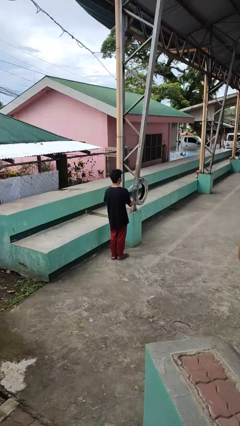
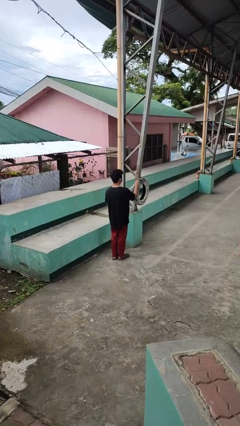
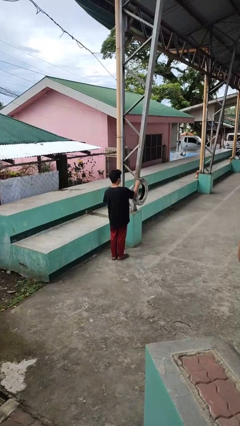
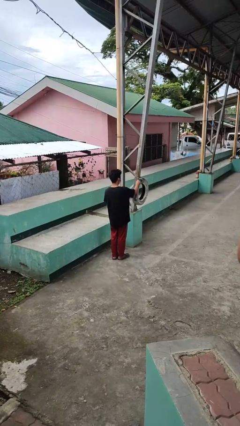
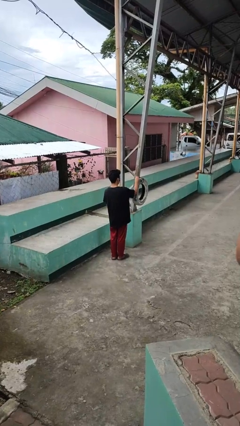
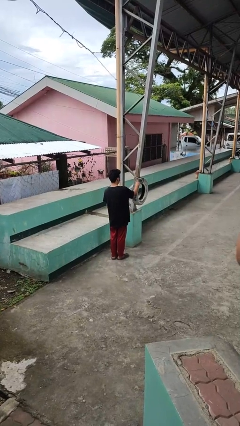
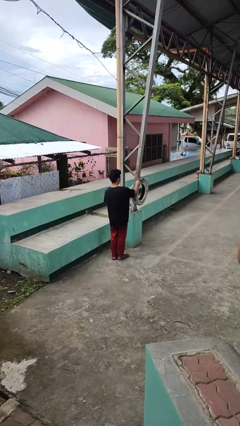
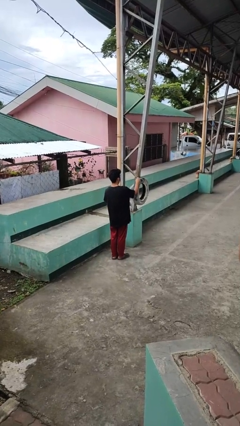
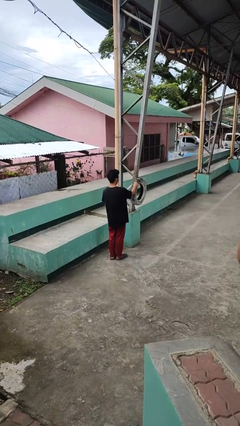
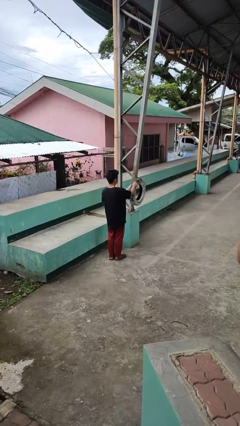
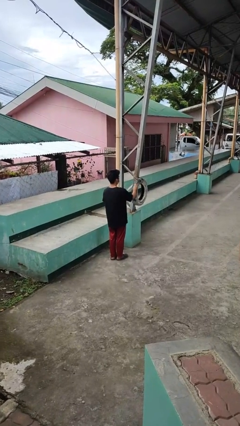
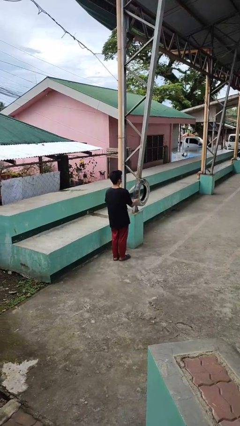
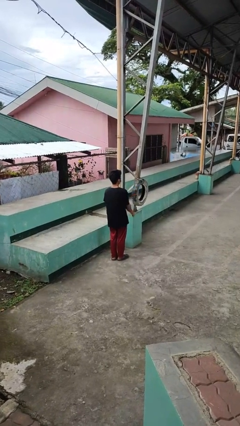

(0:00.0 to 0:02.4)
person taps object with finger

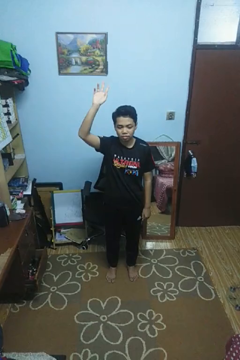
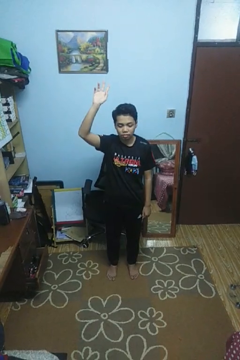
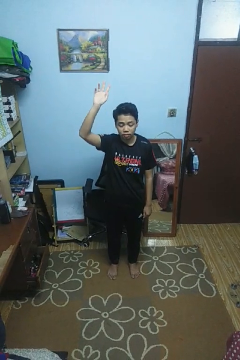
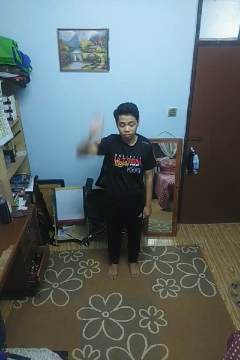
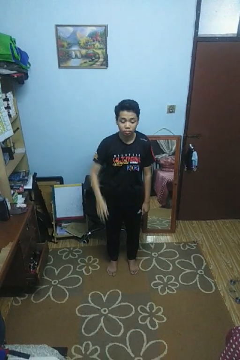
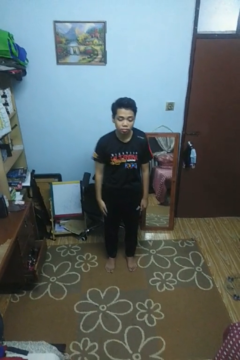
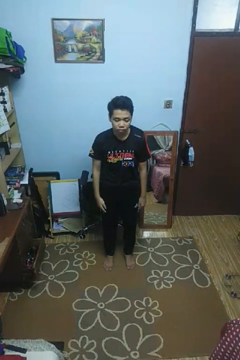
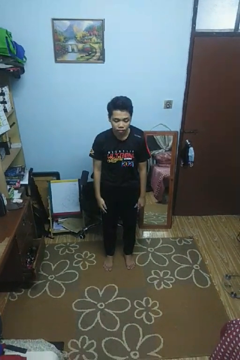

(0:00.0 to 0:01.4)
person gestures lower hand

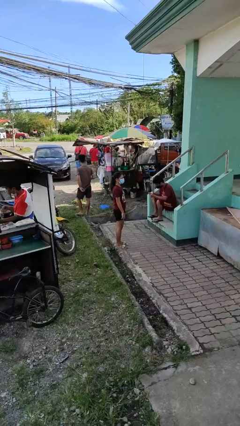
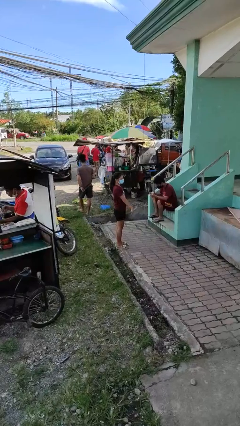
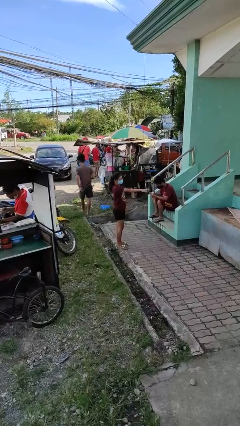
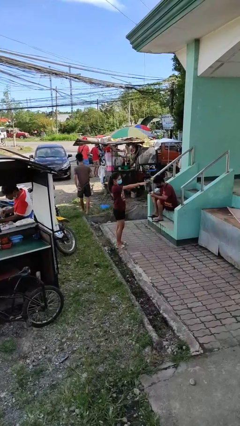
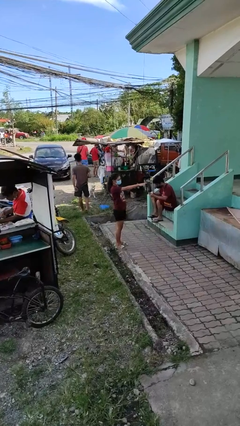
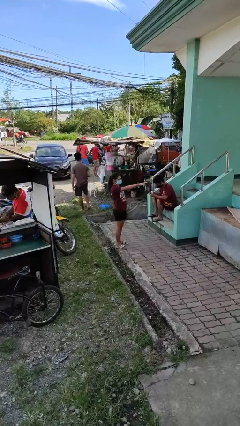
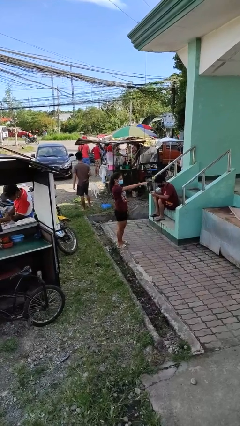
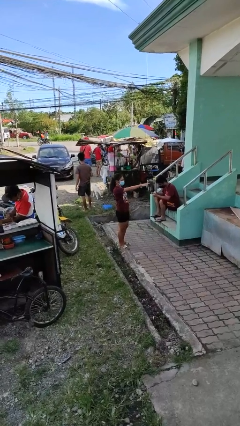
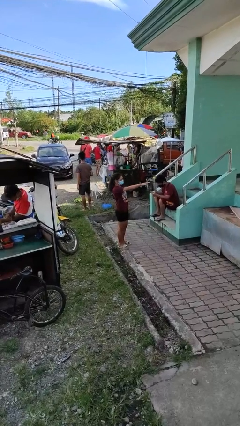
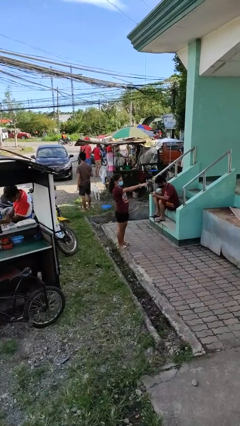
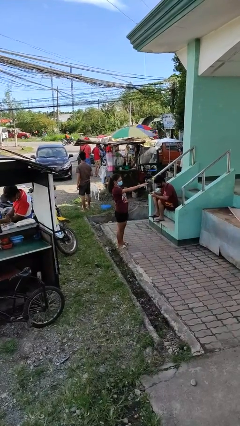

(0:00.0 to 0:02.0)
person points at person

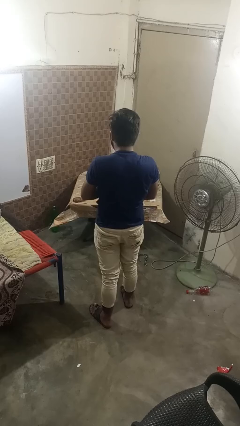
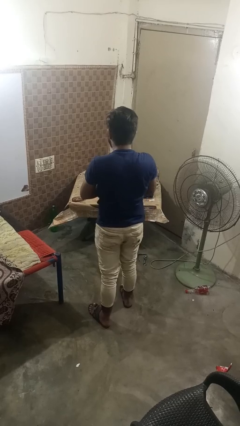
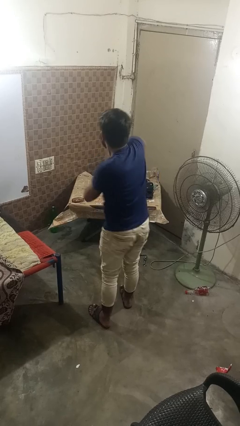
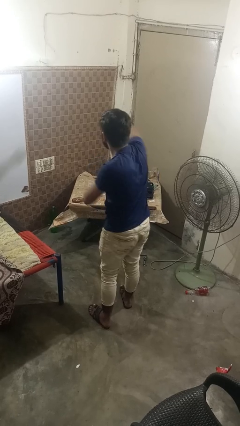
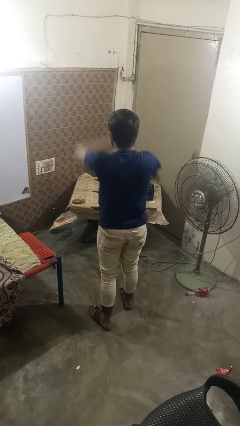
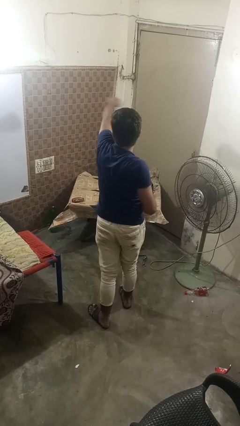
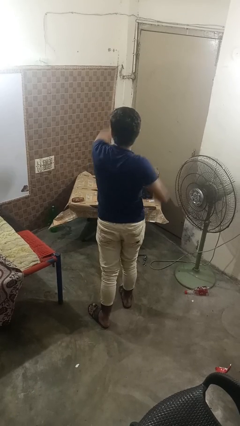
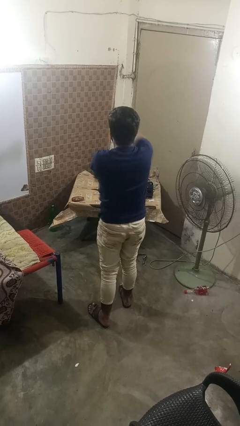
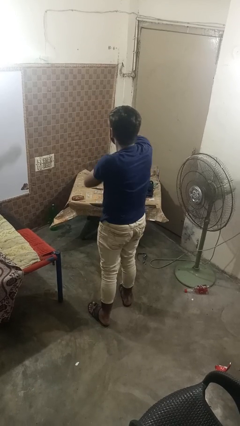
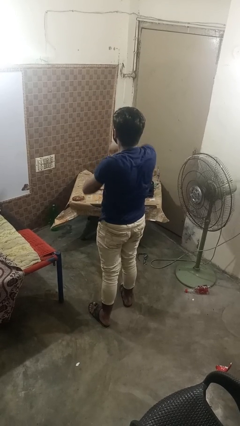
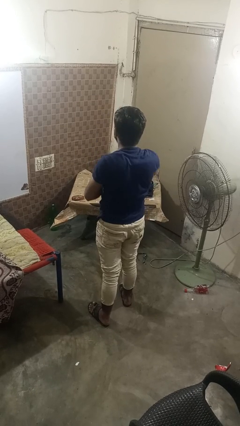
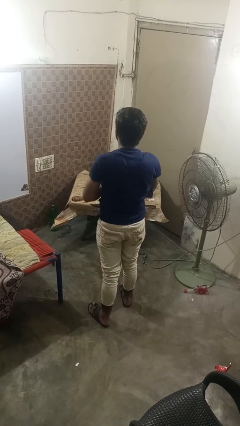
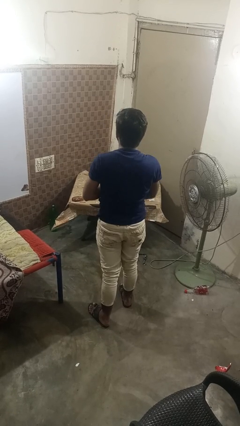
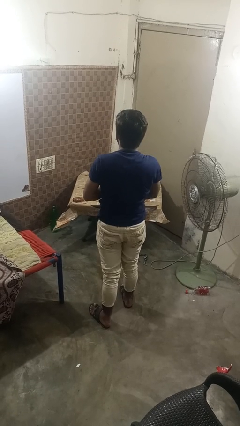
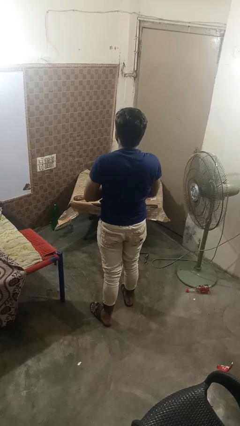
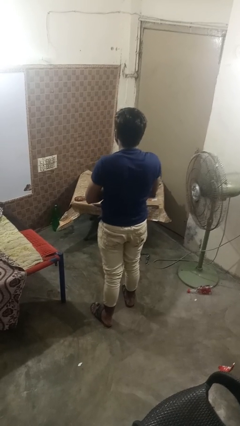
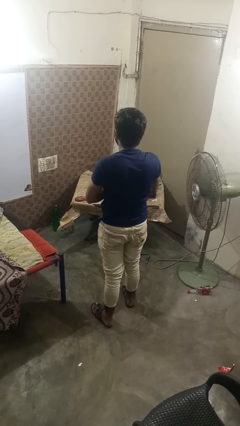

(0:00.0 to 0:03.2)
person punches

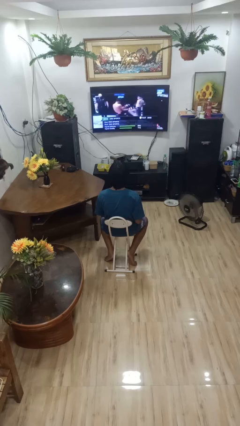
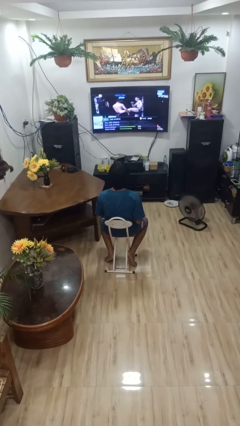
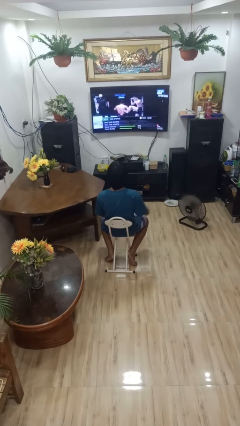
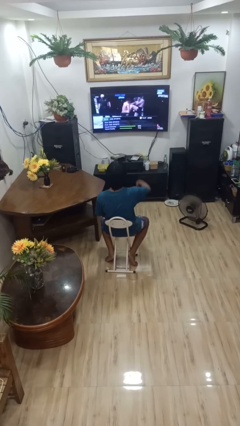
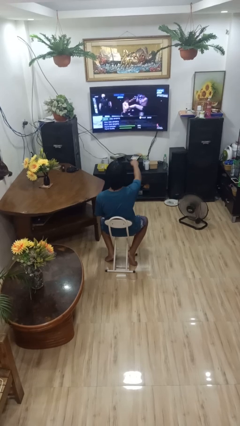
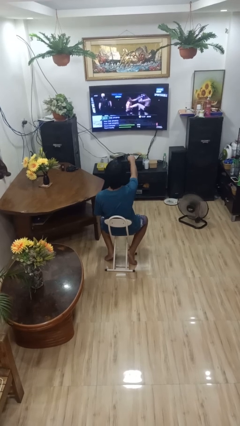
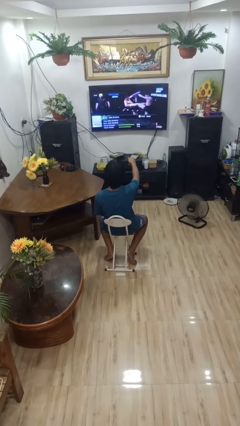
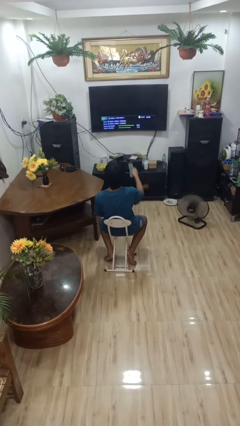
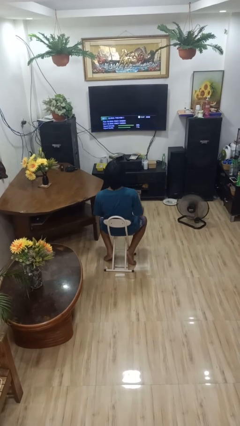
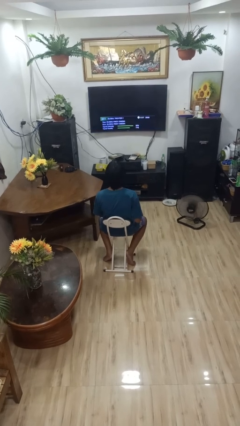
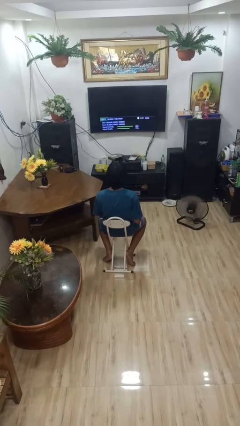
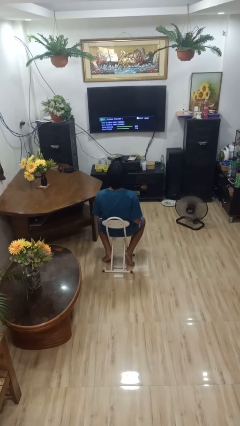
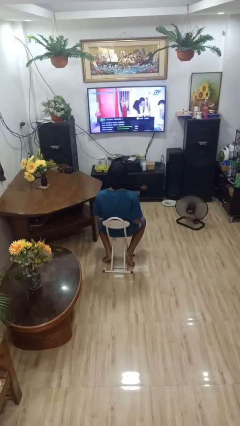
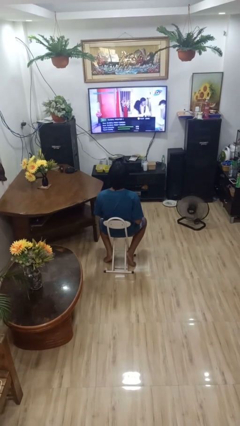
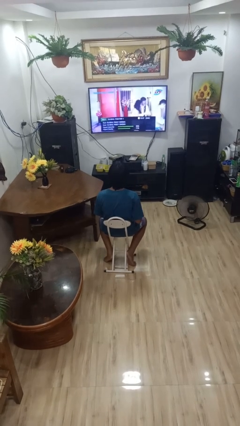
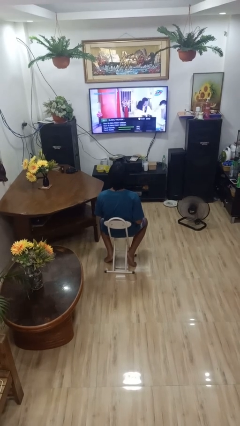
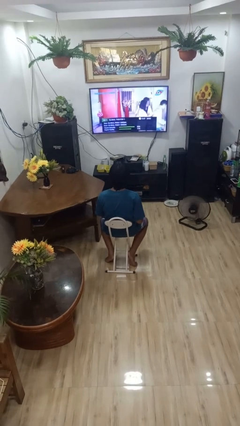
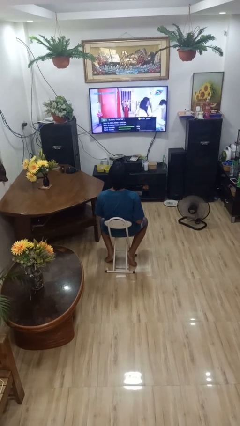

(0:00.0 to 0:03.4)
person uses television remote

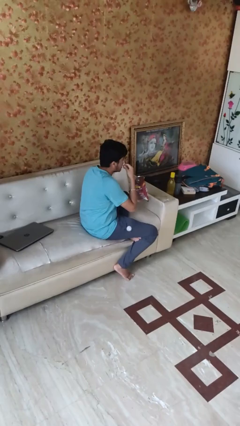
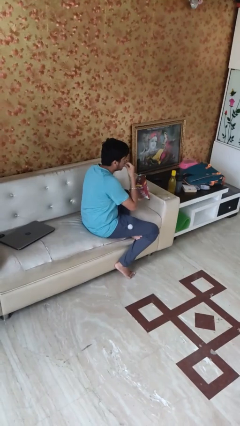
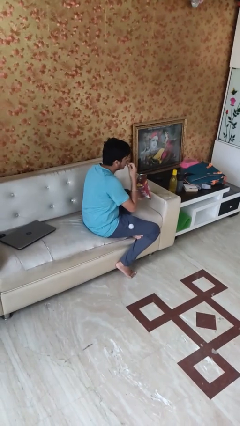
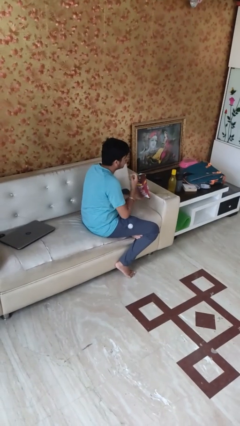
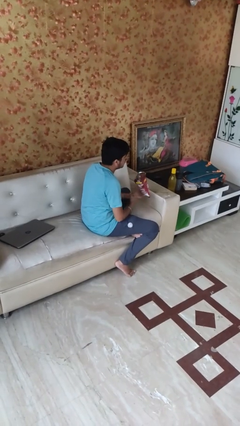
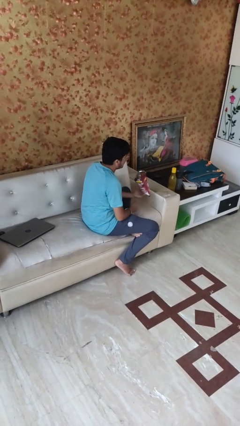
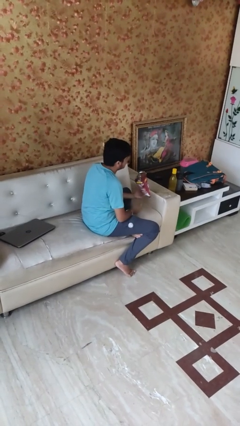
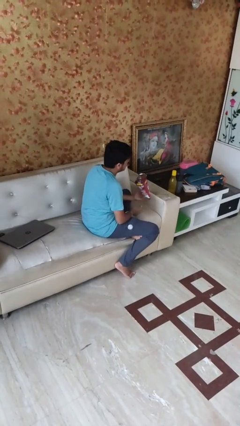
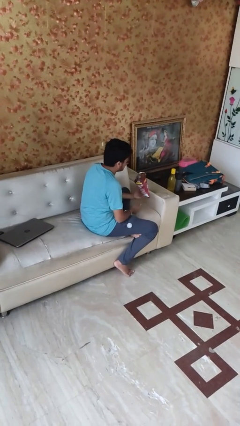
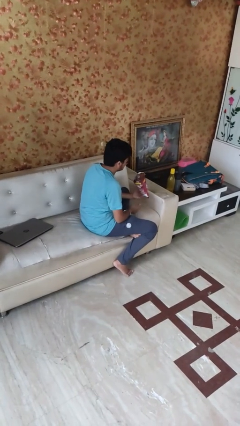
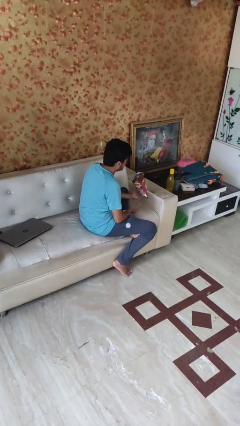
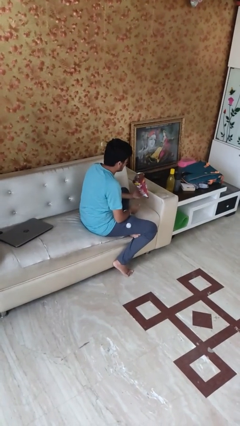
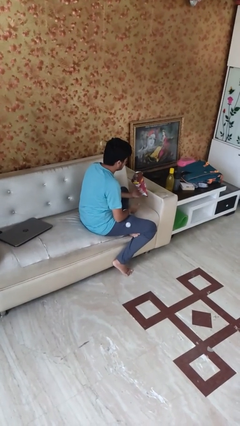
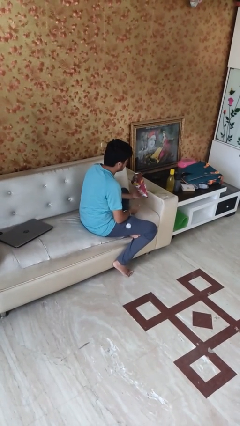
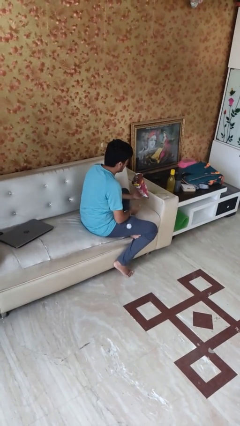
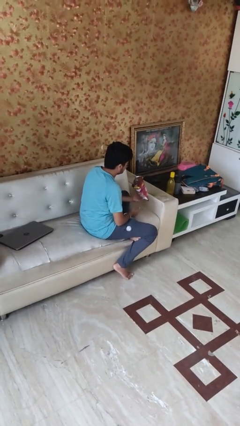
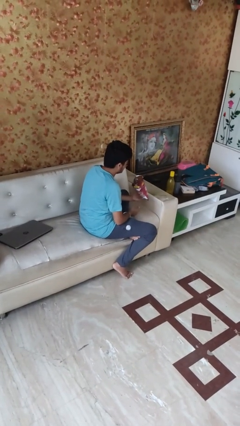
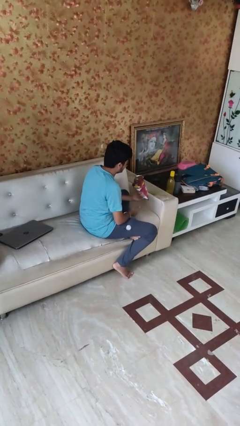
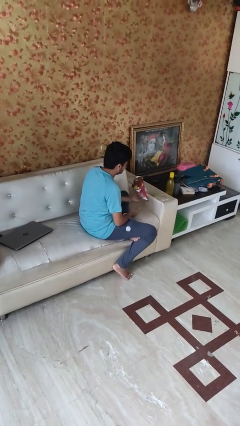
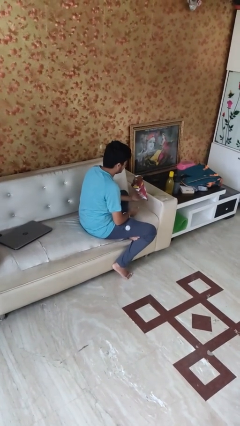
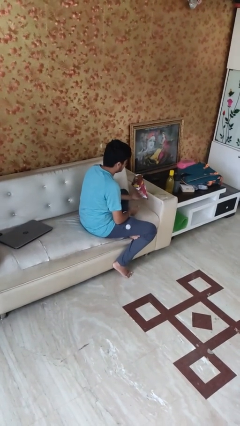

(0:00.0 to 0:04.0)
person eats snack from bag

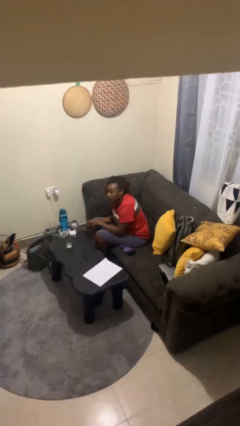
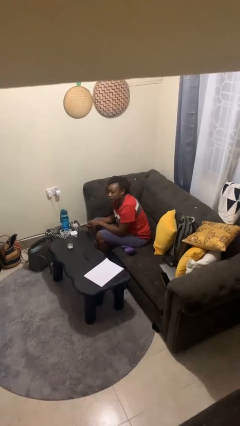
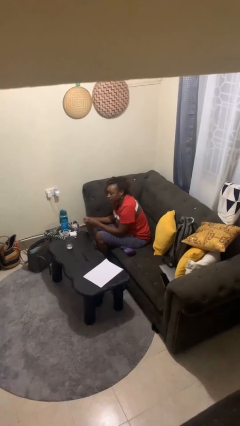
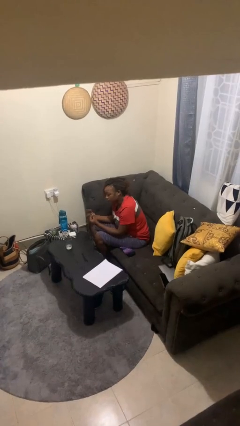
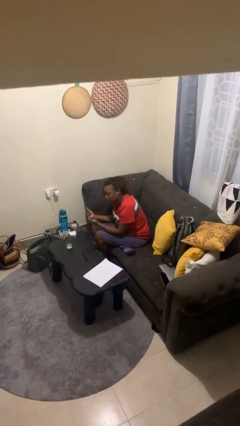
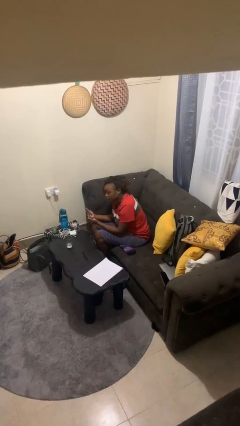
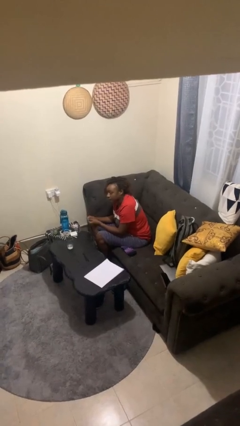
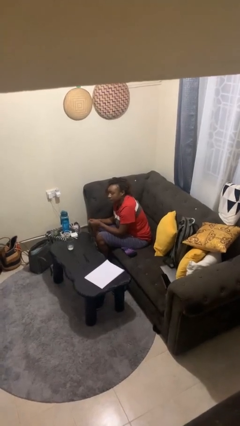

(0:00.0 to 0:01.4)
person snaps fingers
